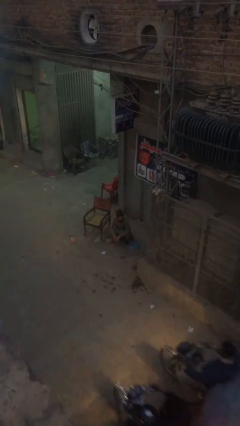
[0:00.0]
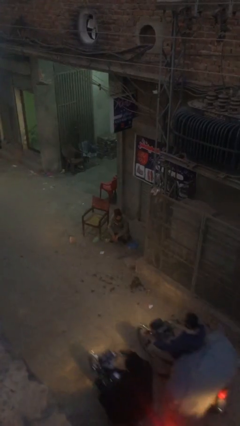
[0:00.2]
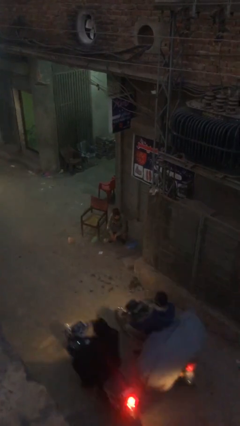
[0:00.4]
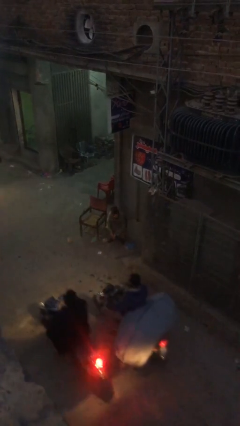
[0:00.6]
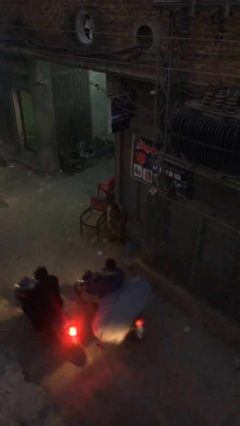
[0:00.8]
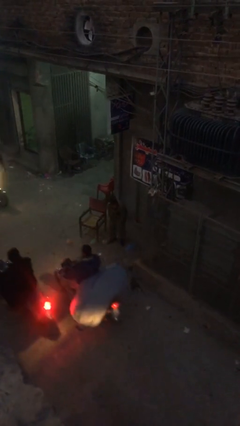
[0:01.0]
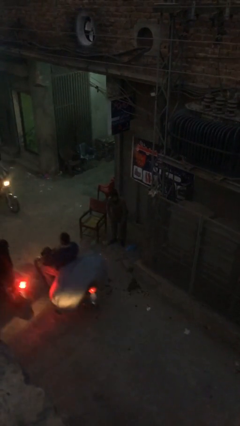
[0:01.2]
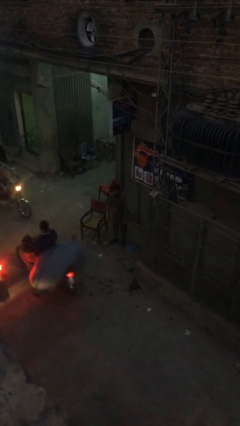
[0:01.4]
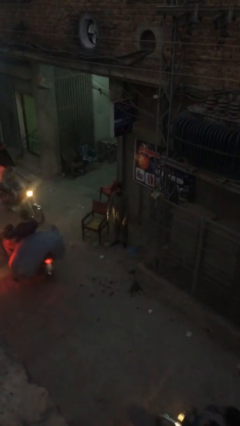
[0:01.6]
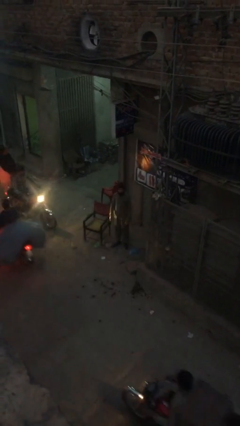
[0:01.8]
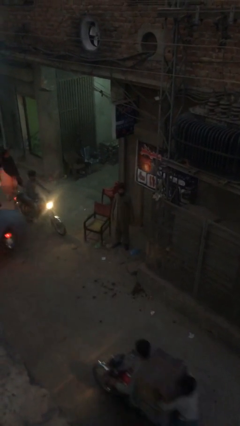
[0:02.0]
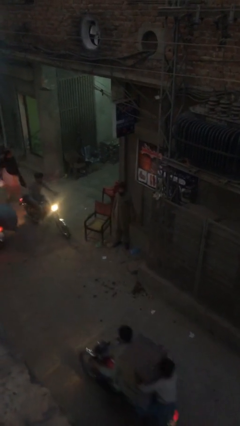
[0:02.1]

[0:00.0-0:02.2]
person stands up

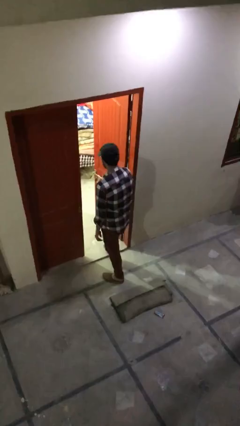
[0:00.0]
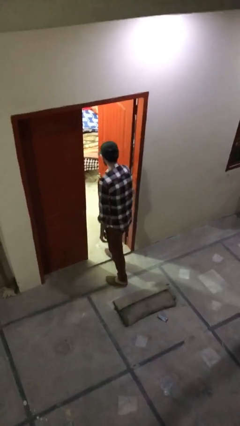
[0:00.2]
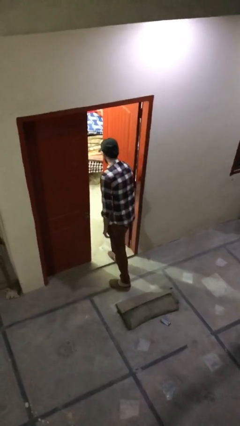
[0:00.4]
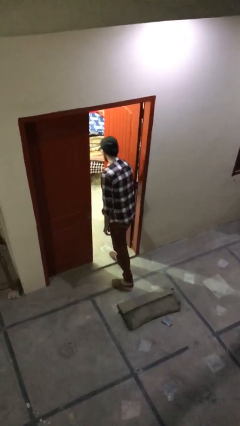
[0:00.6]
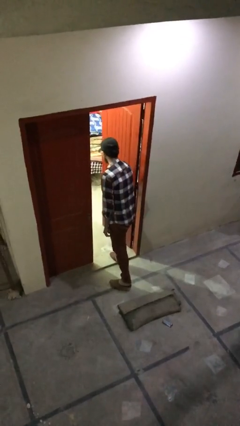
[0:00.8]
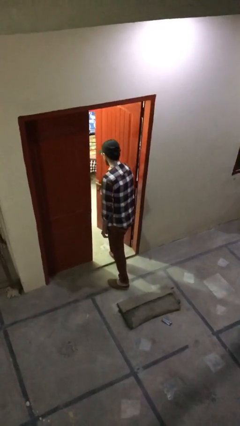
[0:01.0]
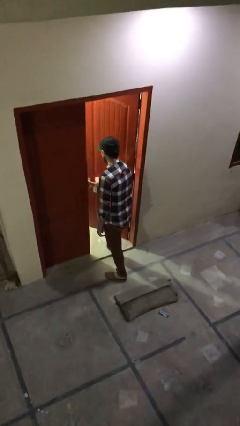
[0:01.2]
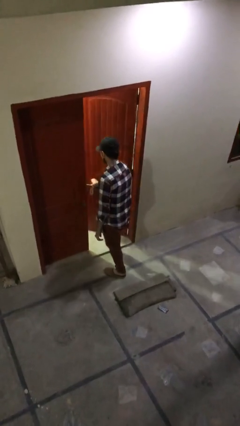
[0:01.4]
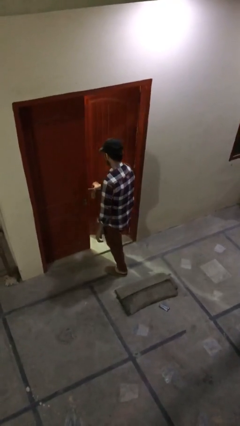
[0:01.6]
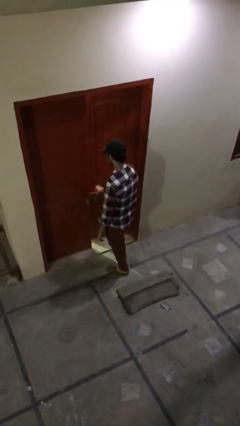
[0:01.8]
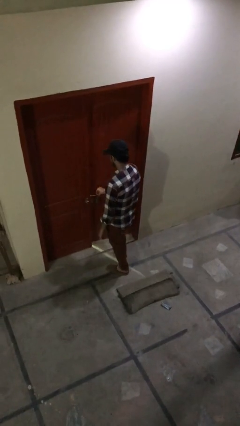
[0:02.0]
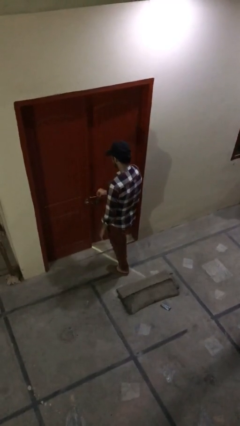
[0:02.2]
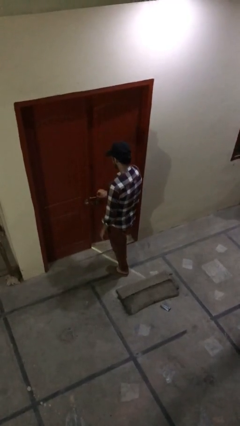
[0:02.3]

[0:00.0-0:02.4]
person closes facility door

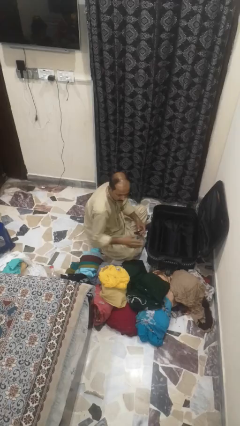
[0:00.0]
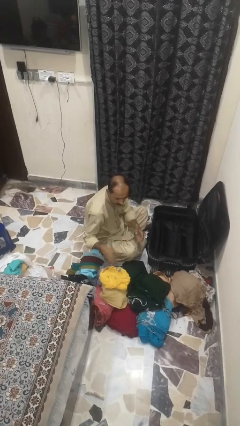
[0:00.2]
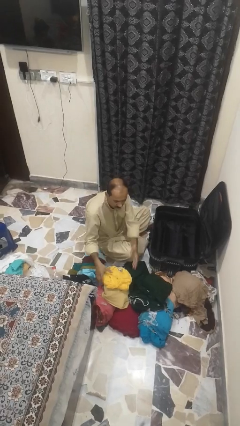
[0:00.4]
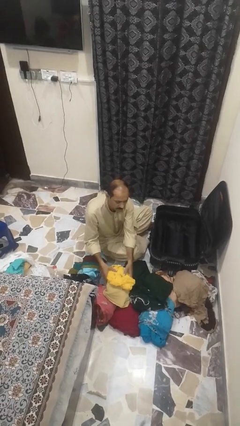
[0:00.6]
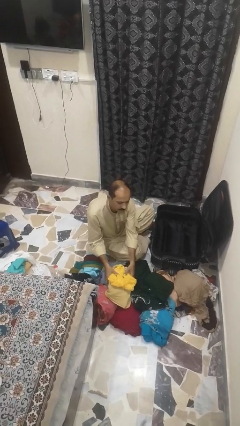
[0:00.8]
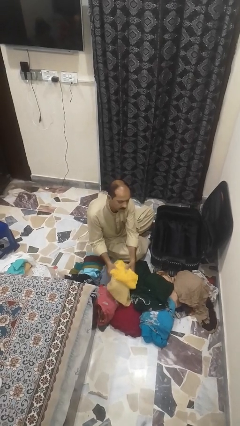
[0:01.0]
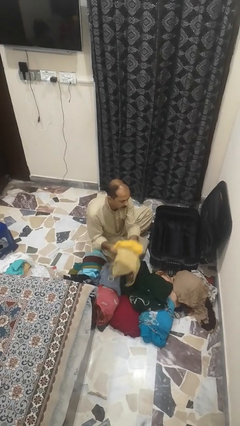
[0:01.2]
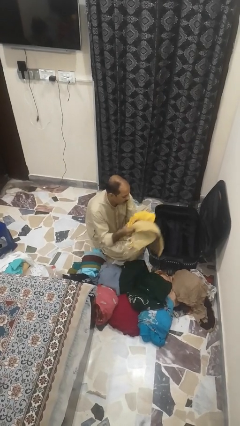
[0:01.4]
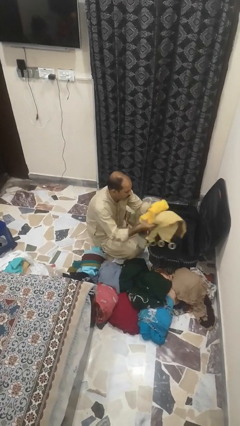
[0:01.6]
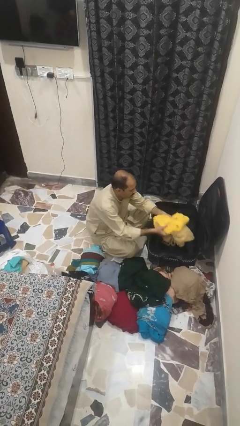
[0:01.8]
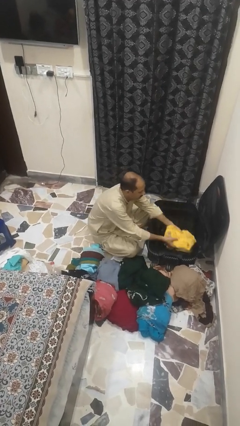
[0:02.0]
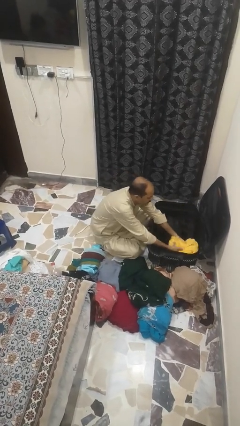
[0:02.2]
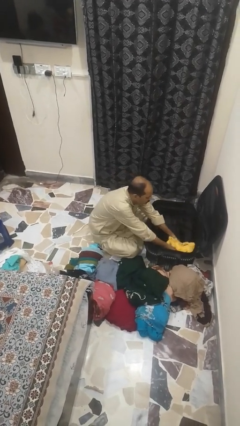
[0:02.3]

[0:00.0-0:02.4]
person loads clothes into suitcase

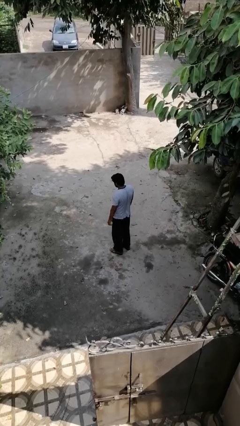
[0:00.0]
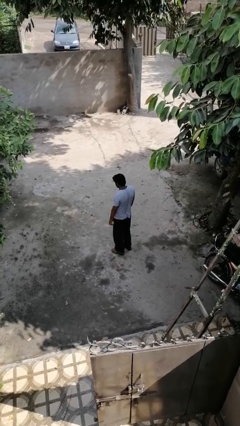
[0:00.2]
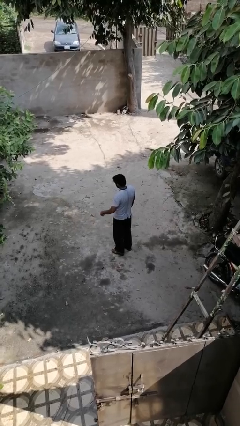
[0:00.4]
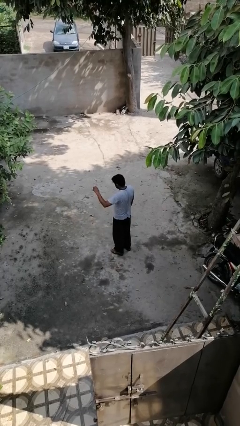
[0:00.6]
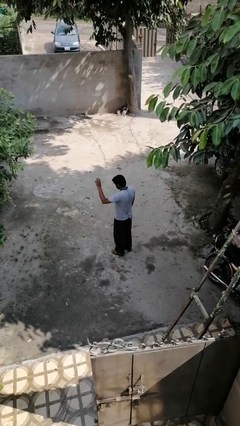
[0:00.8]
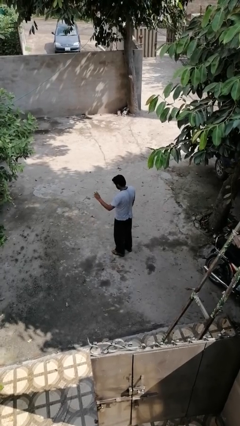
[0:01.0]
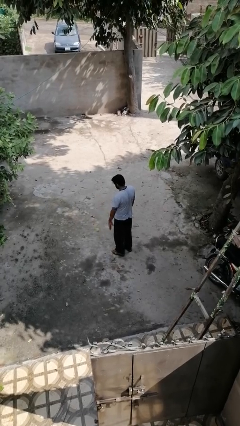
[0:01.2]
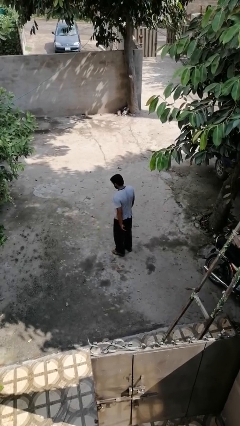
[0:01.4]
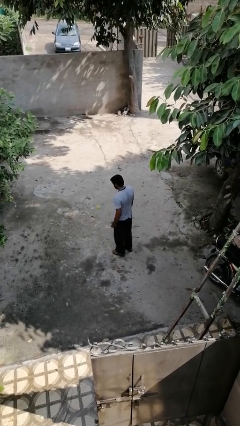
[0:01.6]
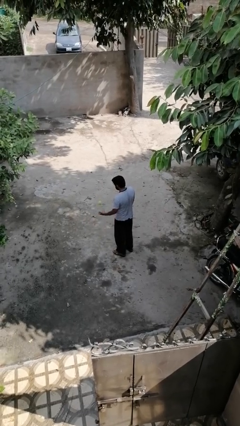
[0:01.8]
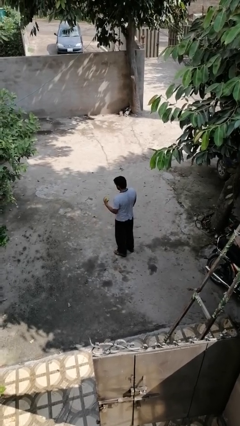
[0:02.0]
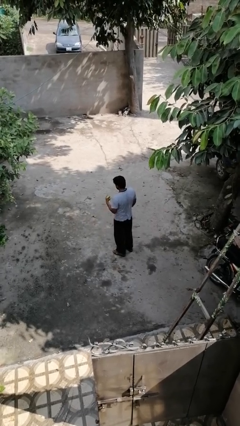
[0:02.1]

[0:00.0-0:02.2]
person bounces ball on floor

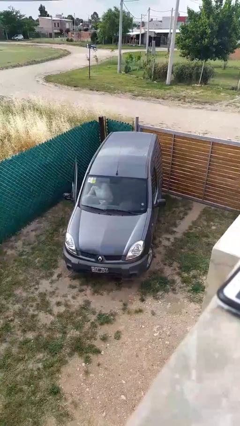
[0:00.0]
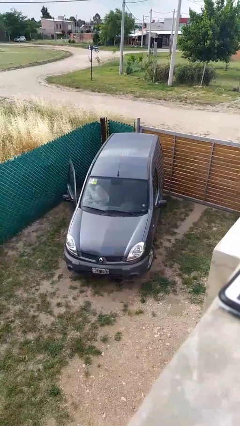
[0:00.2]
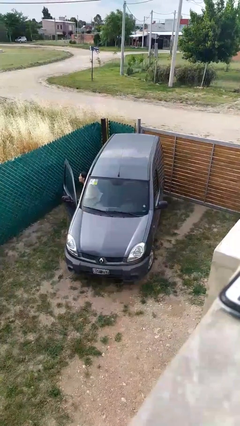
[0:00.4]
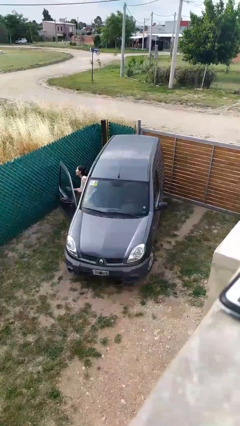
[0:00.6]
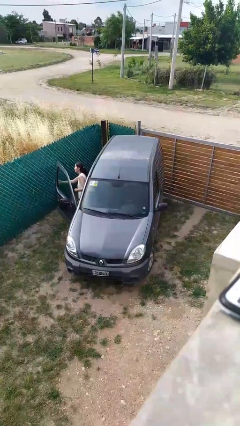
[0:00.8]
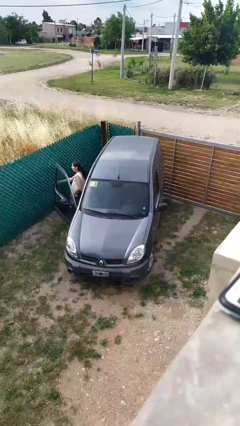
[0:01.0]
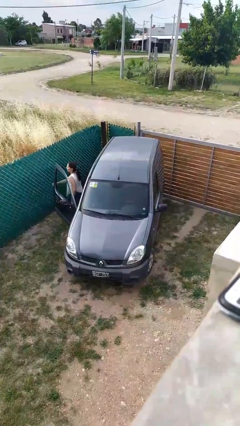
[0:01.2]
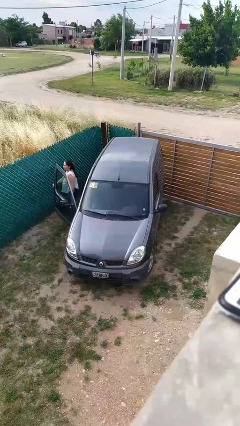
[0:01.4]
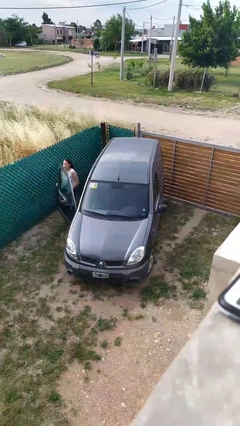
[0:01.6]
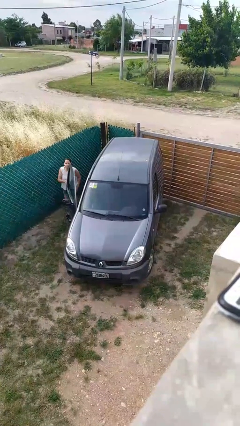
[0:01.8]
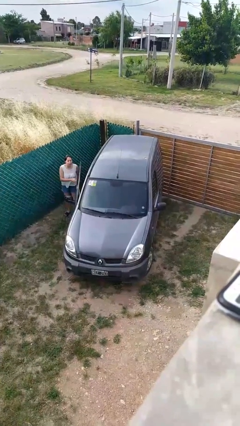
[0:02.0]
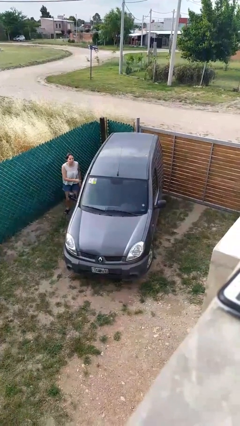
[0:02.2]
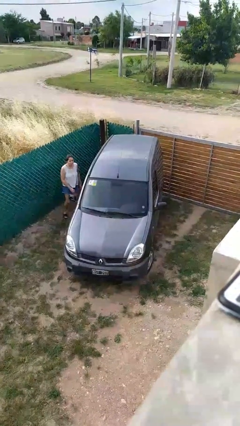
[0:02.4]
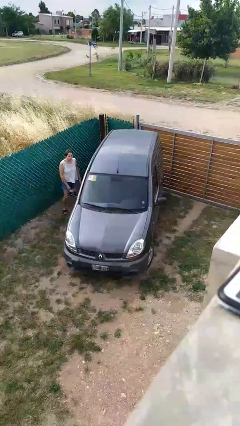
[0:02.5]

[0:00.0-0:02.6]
car drops off person

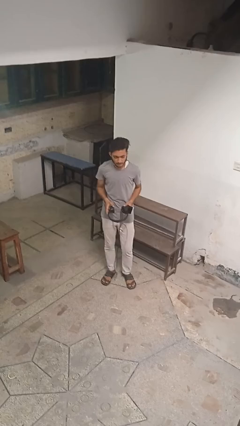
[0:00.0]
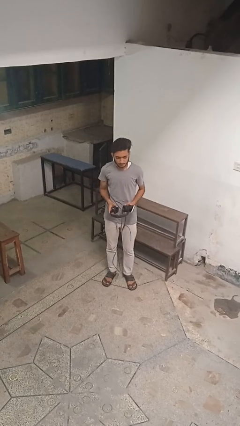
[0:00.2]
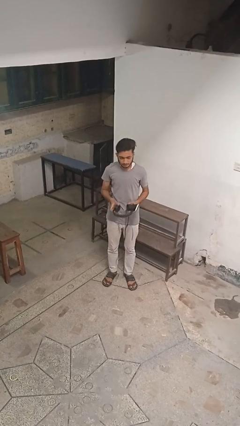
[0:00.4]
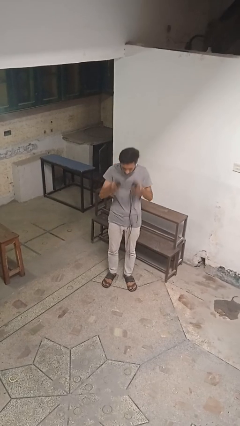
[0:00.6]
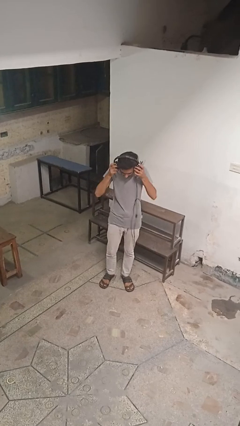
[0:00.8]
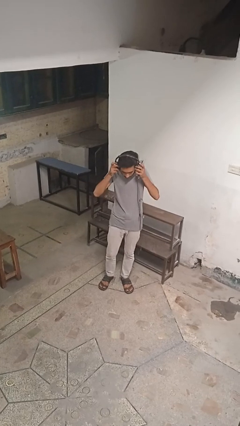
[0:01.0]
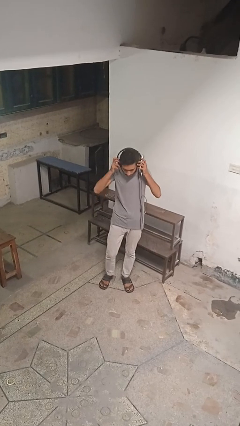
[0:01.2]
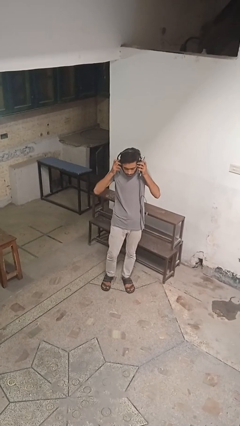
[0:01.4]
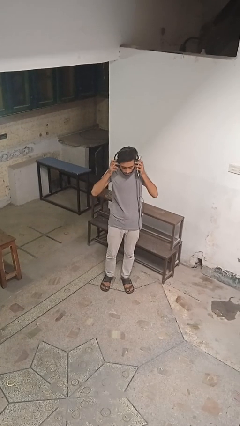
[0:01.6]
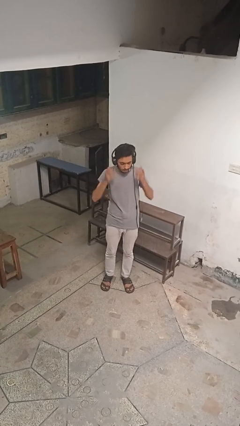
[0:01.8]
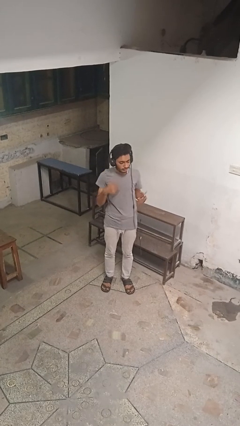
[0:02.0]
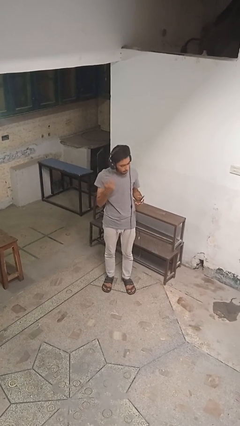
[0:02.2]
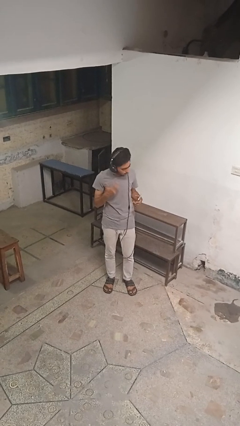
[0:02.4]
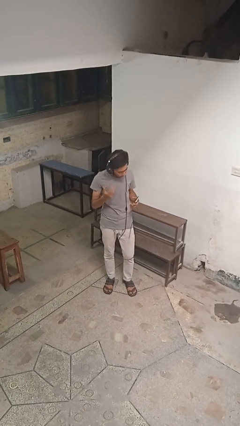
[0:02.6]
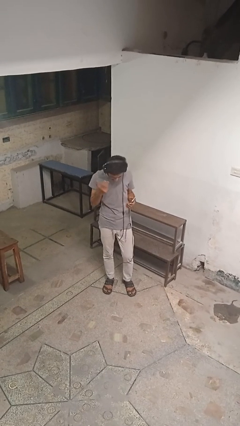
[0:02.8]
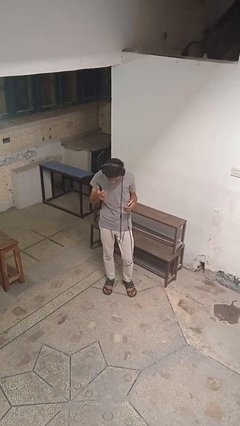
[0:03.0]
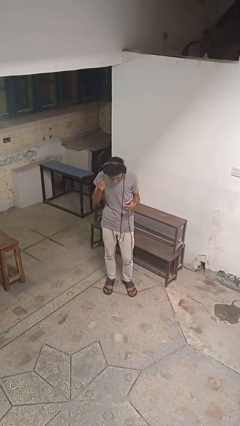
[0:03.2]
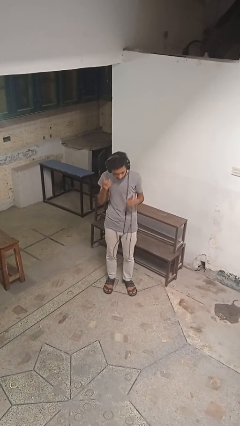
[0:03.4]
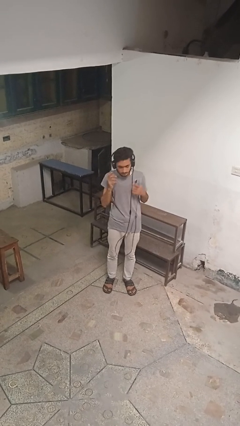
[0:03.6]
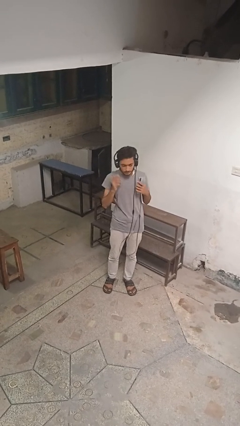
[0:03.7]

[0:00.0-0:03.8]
person puts on headphones

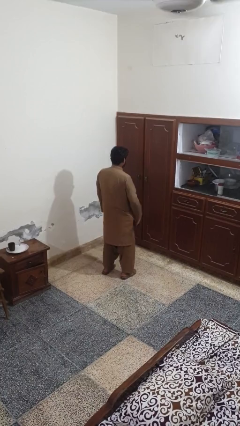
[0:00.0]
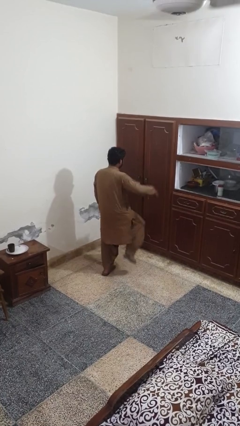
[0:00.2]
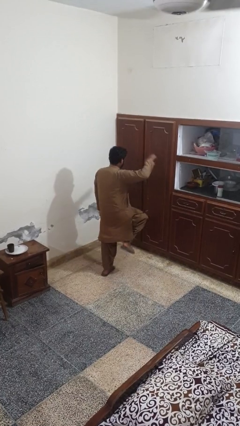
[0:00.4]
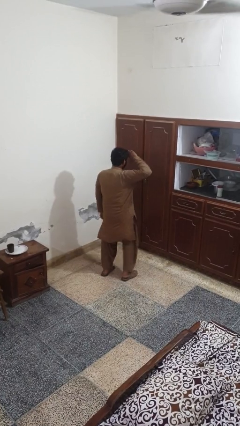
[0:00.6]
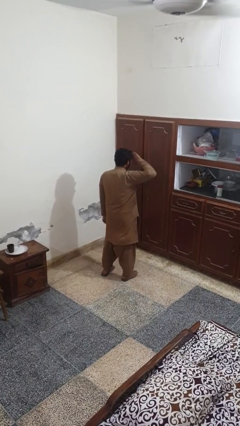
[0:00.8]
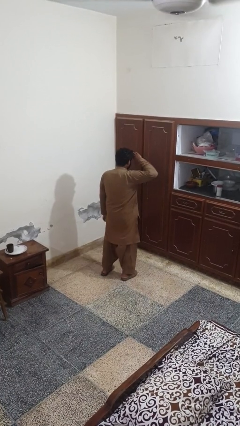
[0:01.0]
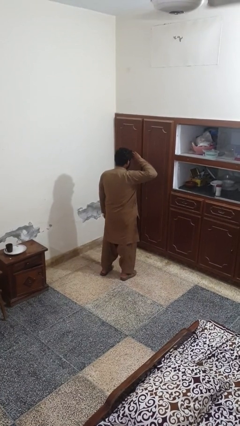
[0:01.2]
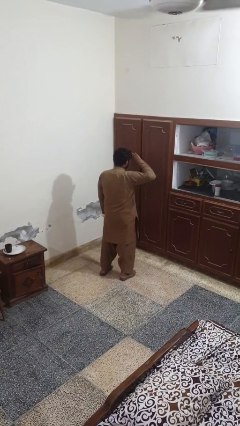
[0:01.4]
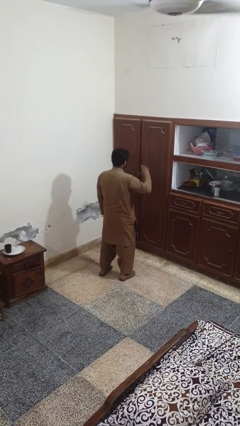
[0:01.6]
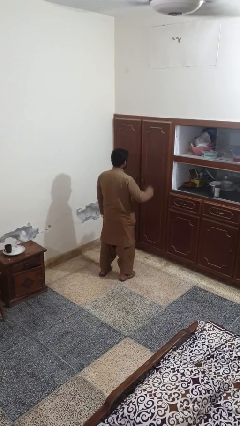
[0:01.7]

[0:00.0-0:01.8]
person salutes
